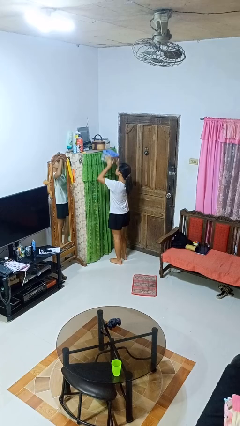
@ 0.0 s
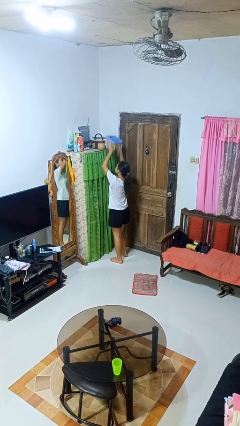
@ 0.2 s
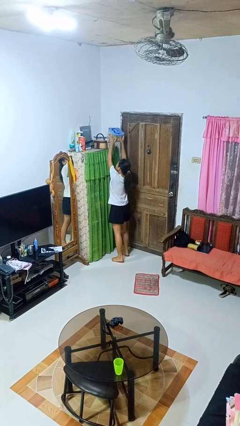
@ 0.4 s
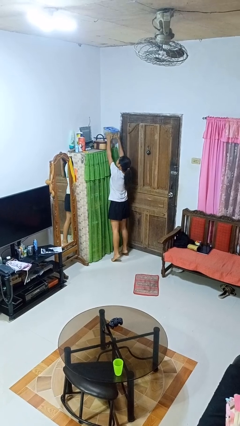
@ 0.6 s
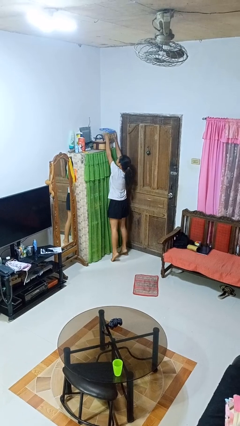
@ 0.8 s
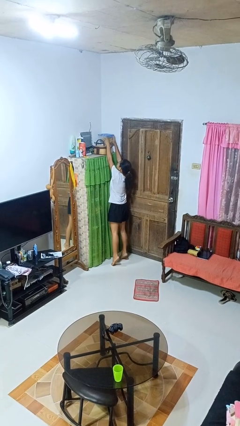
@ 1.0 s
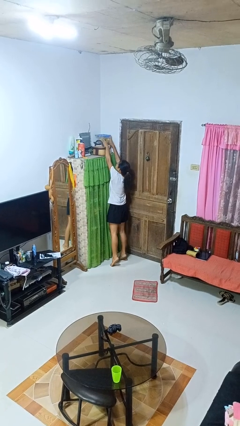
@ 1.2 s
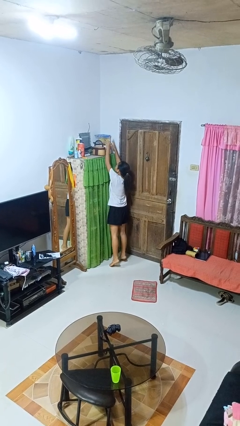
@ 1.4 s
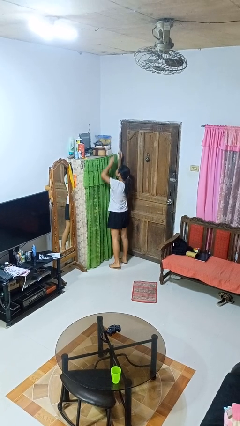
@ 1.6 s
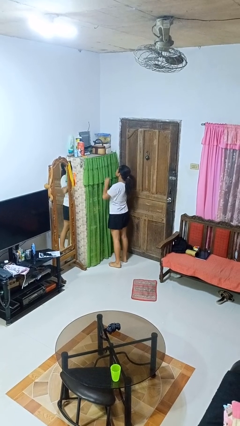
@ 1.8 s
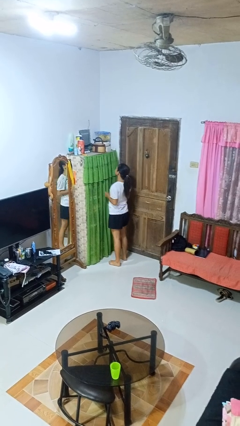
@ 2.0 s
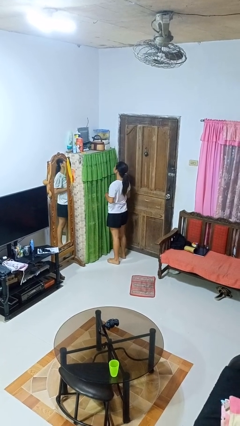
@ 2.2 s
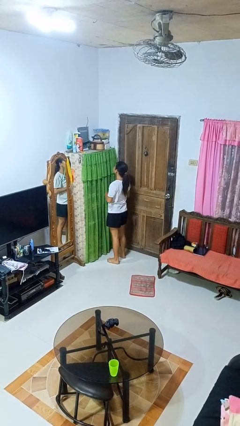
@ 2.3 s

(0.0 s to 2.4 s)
person puts down object on shelf

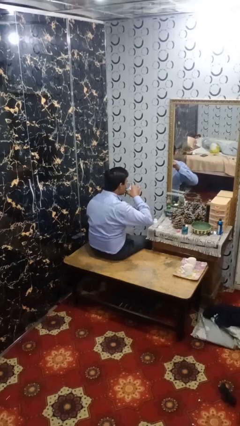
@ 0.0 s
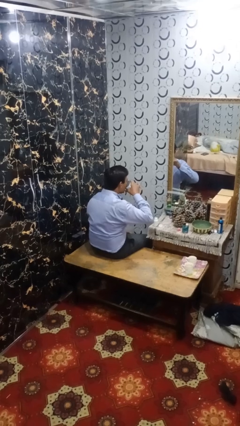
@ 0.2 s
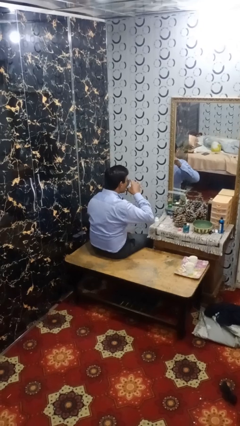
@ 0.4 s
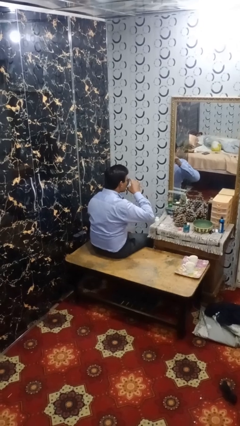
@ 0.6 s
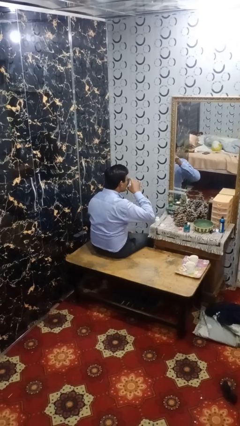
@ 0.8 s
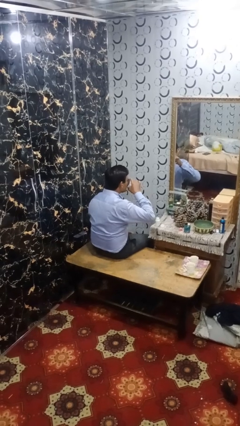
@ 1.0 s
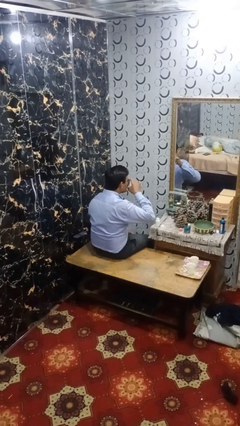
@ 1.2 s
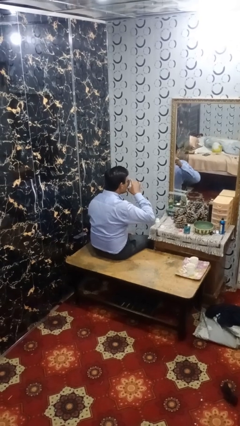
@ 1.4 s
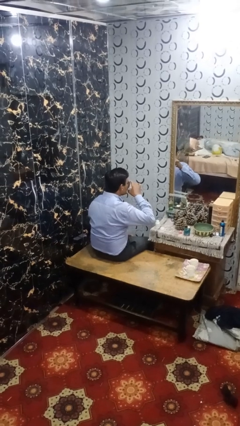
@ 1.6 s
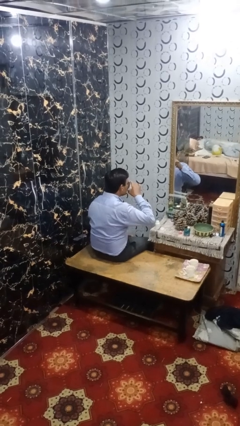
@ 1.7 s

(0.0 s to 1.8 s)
person drinks from cup

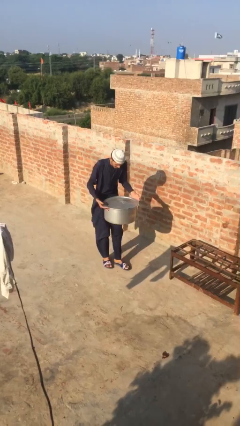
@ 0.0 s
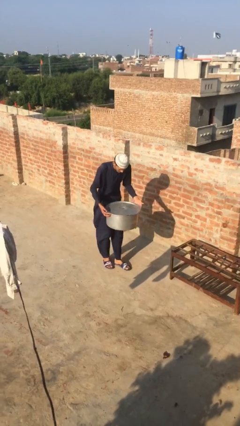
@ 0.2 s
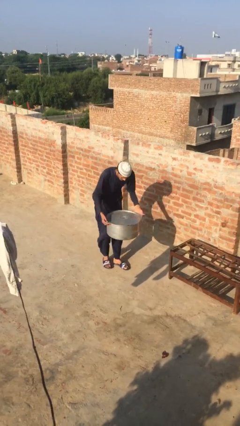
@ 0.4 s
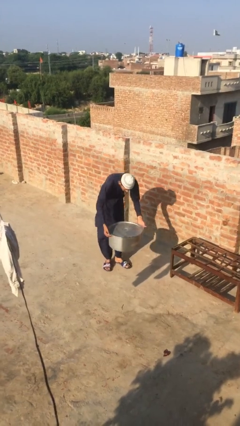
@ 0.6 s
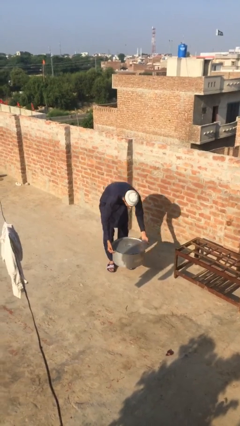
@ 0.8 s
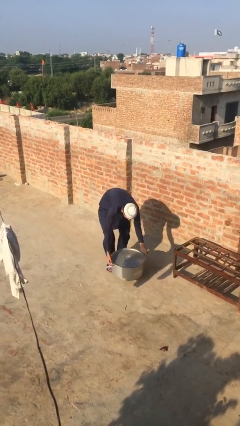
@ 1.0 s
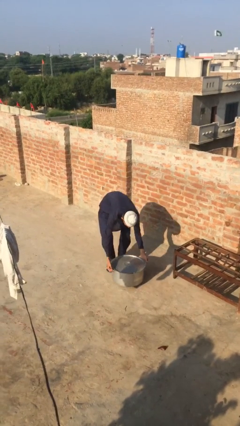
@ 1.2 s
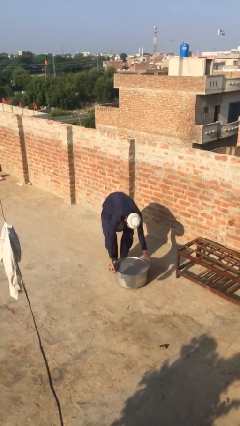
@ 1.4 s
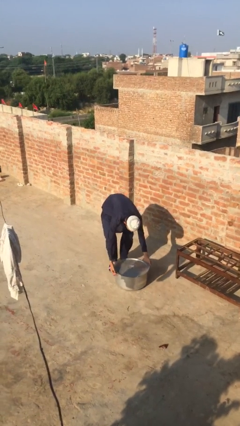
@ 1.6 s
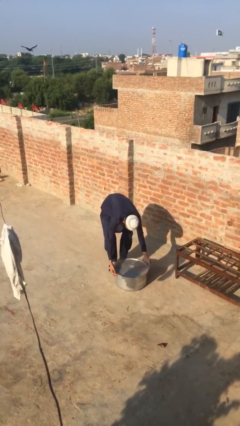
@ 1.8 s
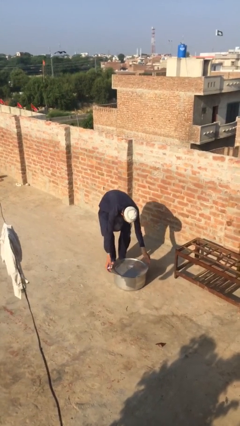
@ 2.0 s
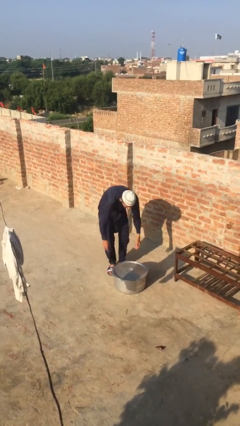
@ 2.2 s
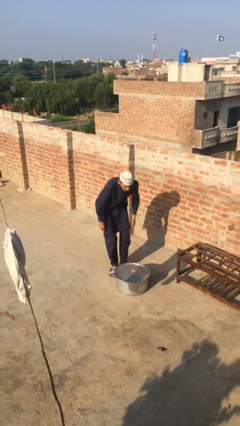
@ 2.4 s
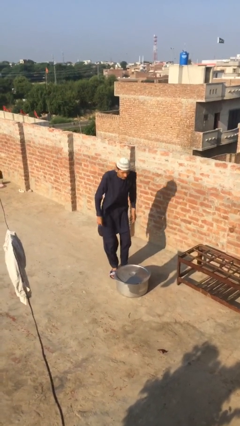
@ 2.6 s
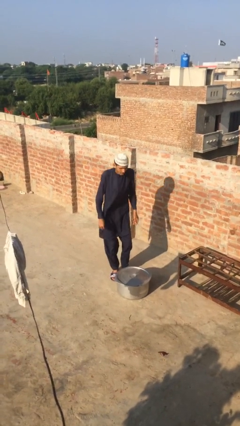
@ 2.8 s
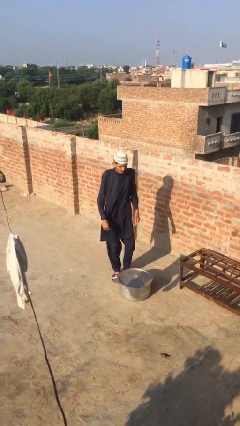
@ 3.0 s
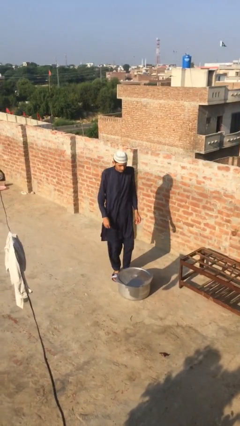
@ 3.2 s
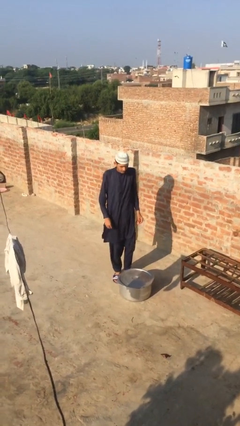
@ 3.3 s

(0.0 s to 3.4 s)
person puts down object on floor

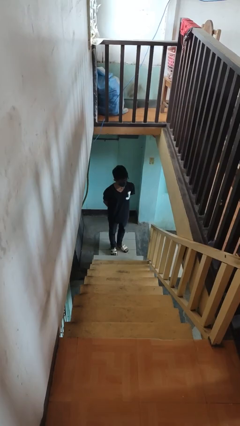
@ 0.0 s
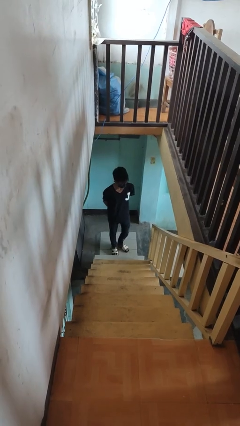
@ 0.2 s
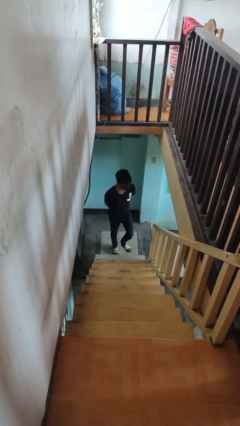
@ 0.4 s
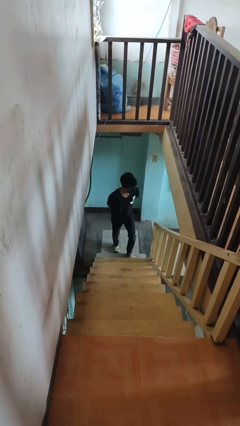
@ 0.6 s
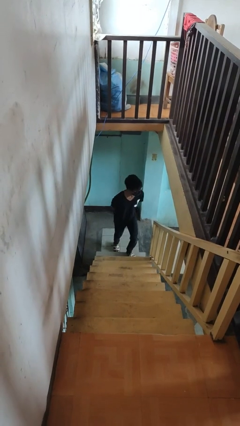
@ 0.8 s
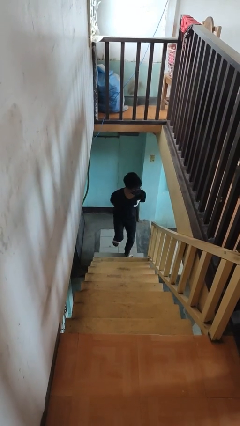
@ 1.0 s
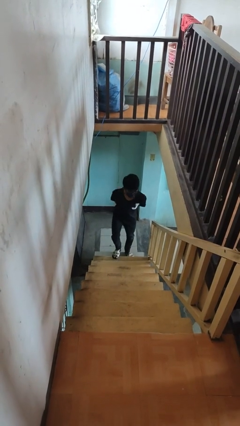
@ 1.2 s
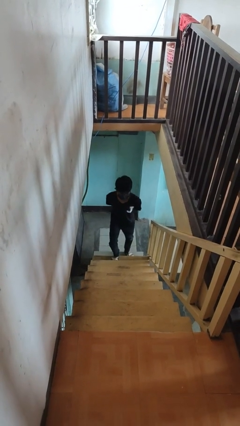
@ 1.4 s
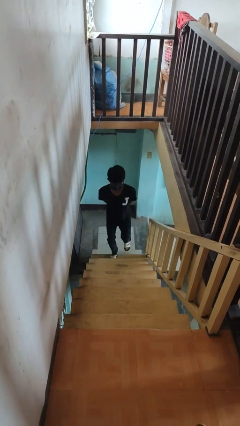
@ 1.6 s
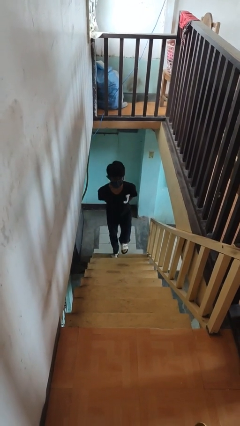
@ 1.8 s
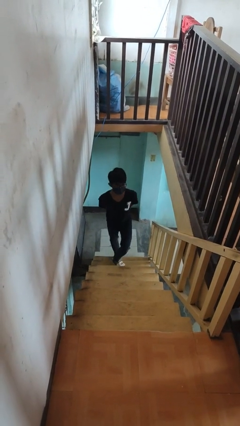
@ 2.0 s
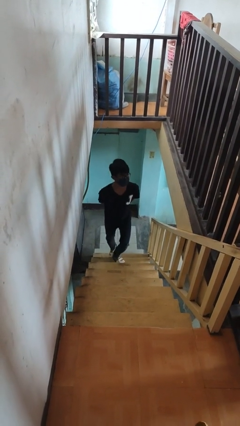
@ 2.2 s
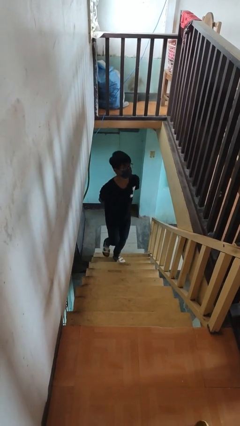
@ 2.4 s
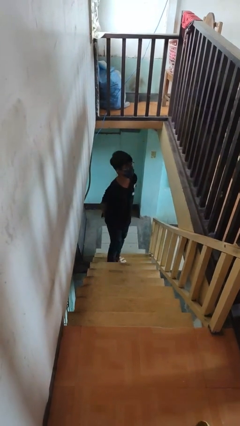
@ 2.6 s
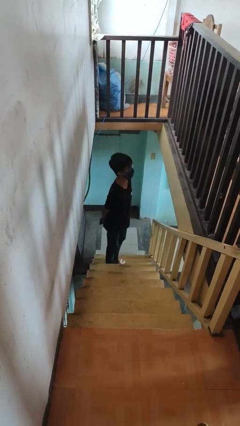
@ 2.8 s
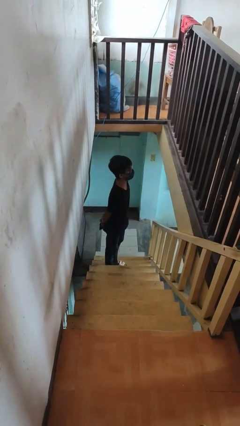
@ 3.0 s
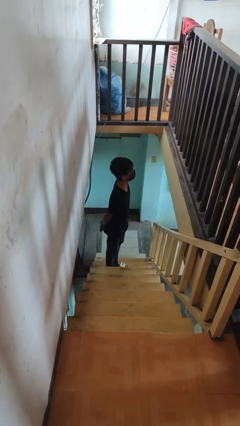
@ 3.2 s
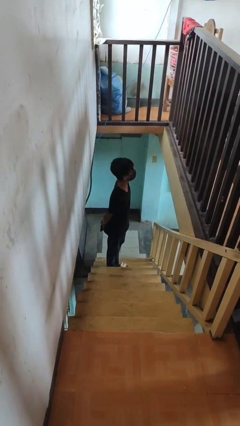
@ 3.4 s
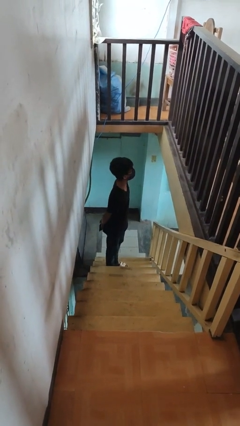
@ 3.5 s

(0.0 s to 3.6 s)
person climbs up ladder

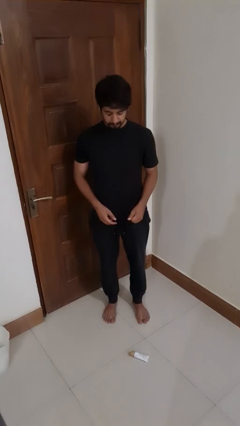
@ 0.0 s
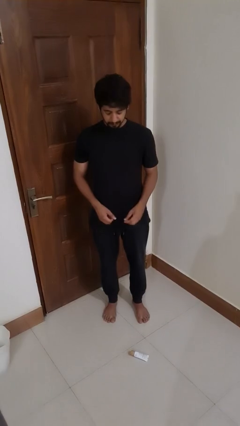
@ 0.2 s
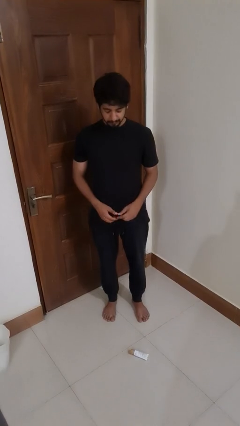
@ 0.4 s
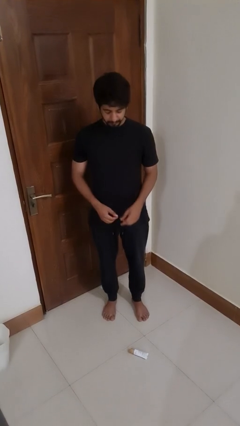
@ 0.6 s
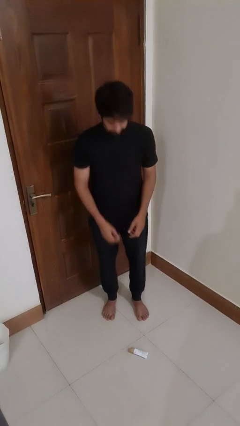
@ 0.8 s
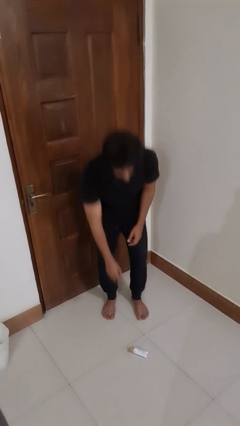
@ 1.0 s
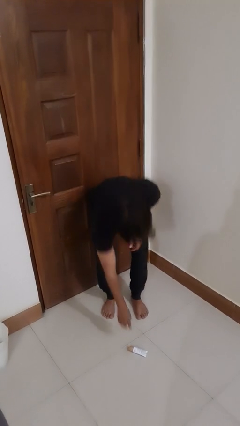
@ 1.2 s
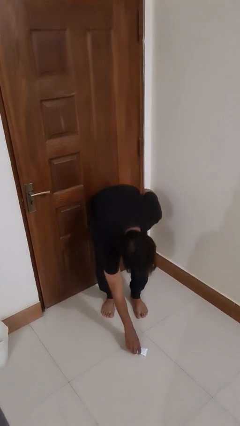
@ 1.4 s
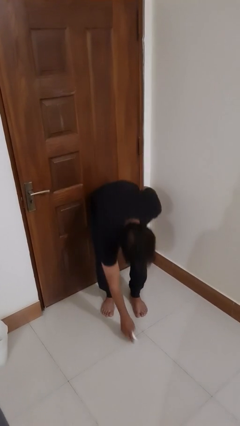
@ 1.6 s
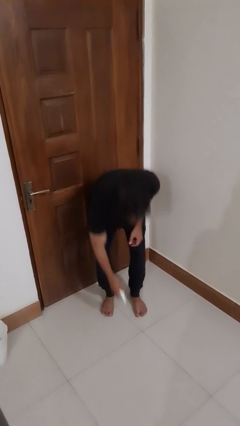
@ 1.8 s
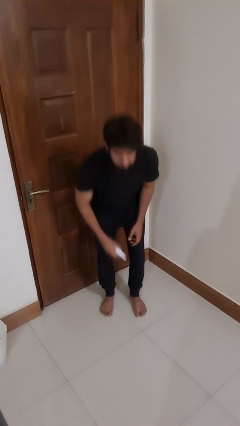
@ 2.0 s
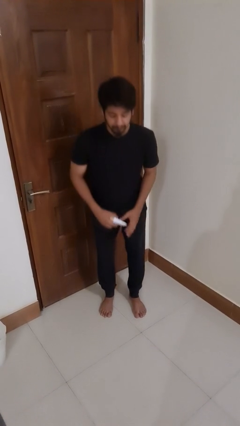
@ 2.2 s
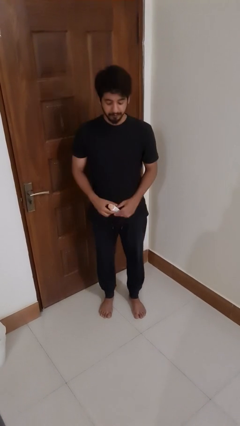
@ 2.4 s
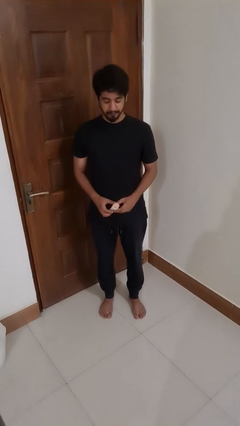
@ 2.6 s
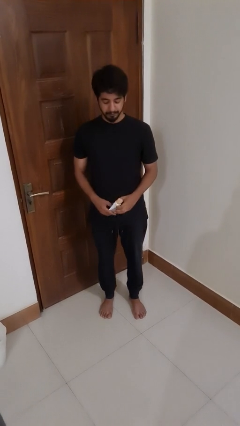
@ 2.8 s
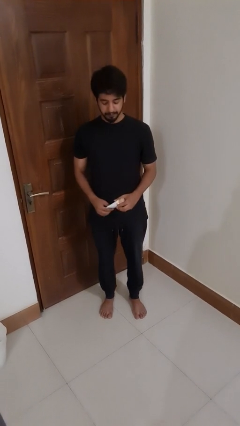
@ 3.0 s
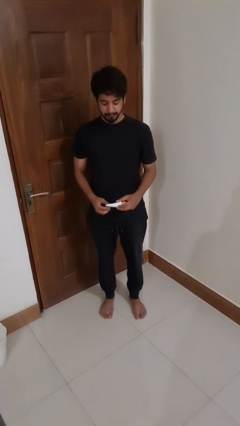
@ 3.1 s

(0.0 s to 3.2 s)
person picks up object from floor

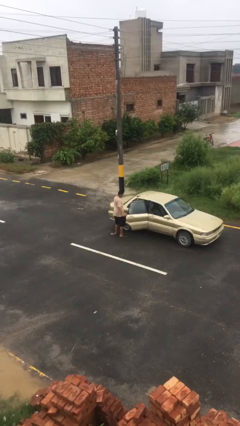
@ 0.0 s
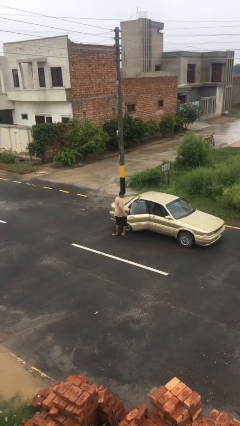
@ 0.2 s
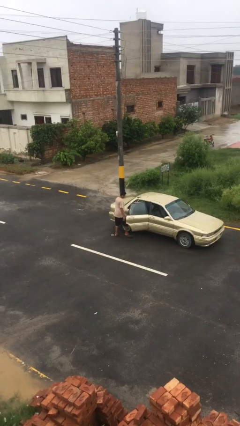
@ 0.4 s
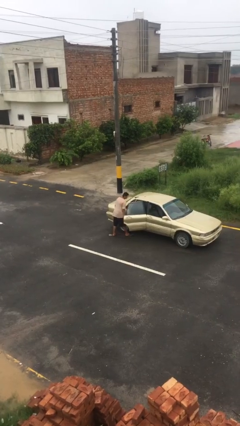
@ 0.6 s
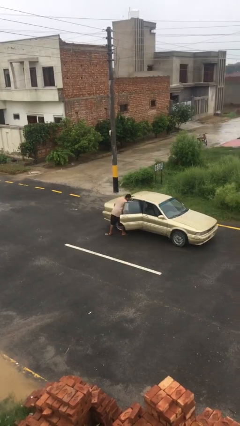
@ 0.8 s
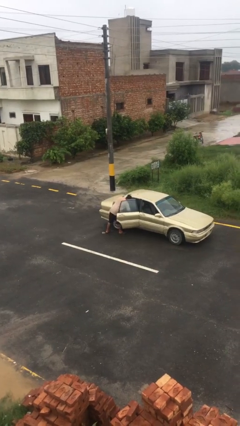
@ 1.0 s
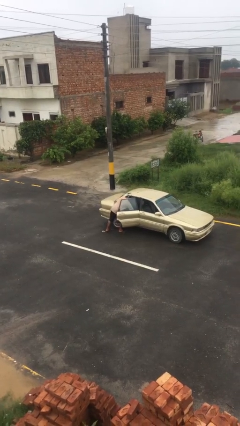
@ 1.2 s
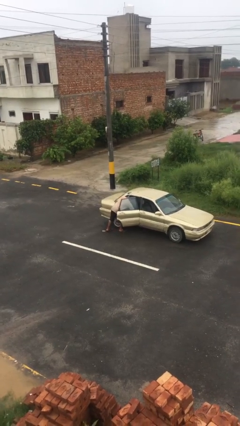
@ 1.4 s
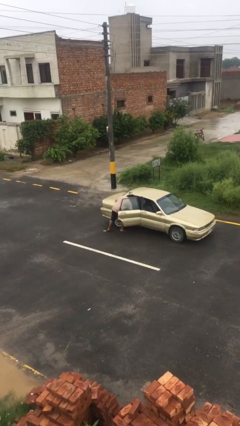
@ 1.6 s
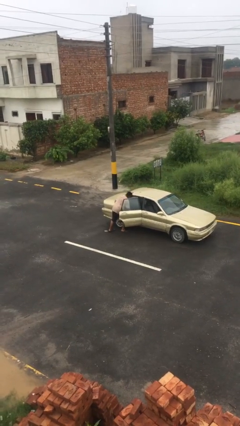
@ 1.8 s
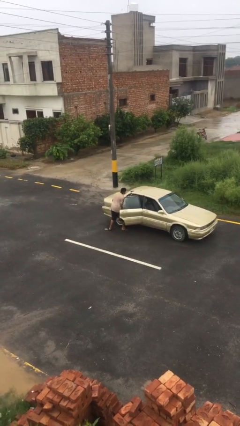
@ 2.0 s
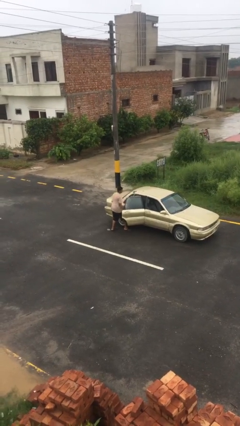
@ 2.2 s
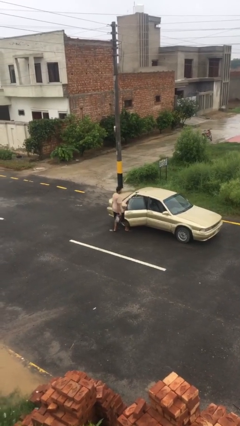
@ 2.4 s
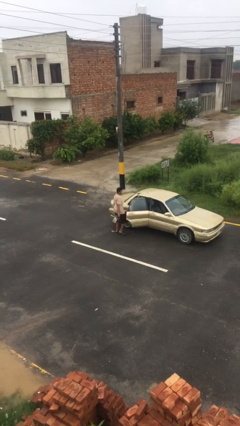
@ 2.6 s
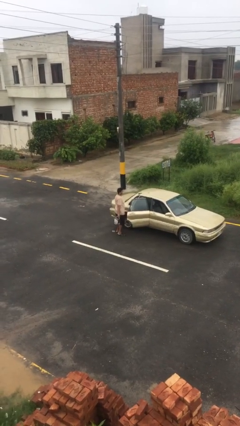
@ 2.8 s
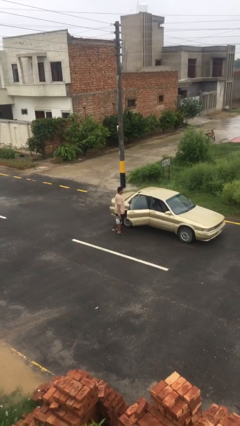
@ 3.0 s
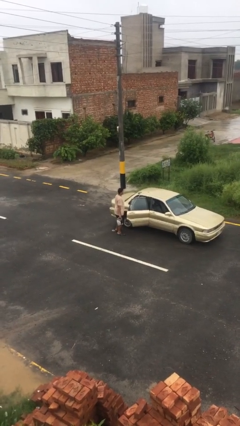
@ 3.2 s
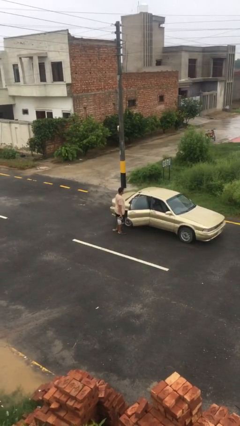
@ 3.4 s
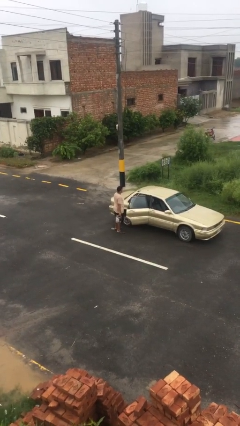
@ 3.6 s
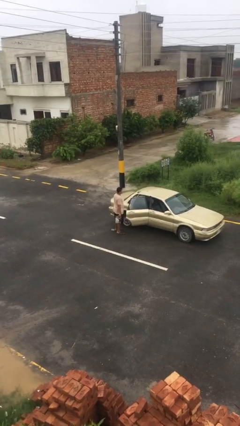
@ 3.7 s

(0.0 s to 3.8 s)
person unloads car
